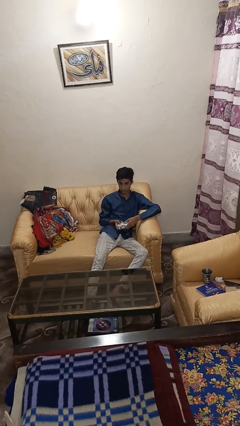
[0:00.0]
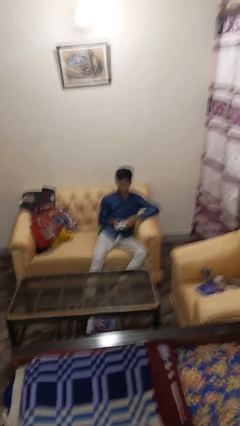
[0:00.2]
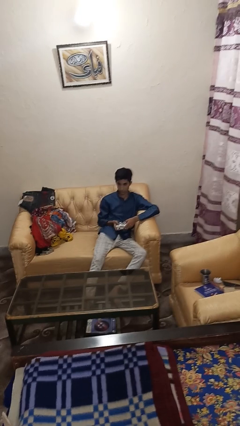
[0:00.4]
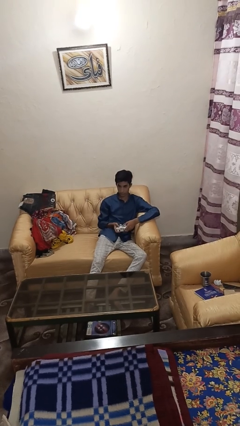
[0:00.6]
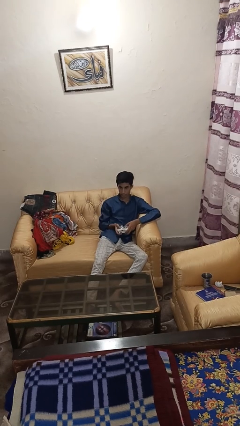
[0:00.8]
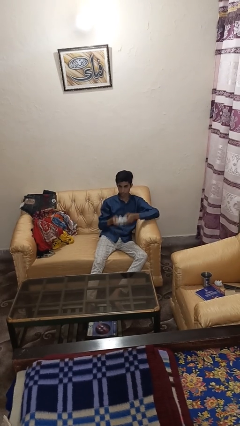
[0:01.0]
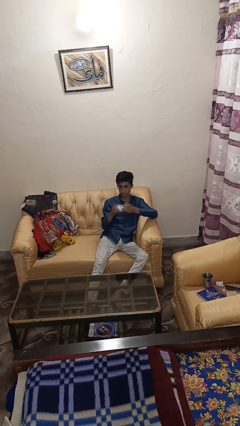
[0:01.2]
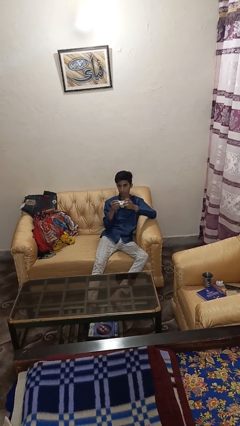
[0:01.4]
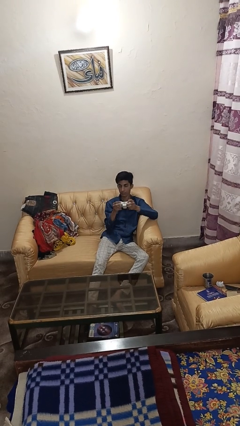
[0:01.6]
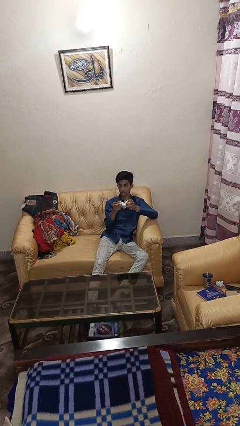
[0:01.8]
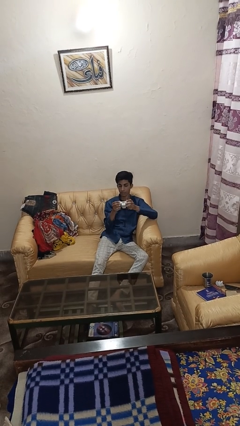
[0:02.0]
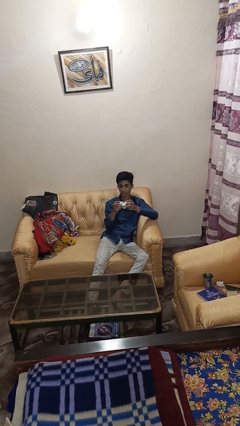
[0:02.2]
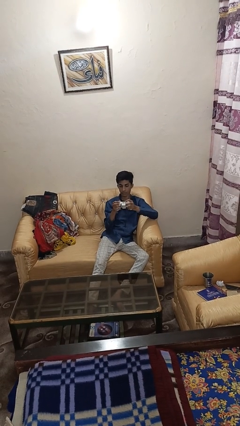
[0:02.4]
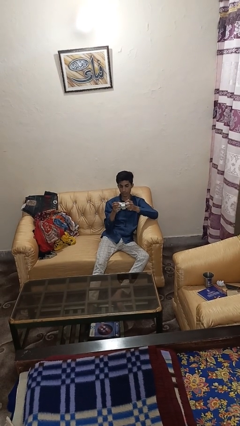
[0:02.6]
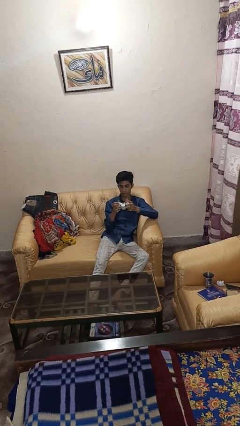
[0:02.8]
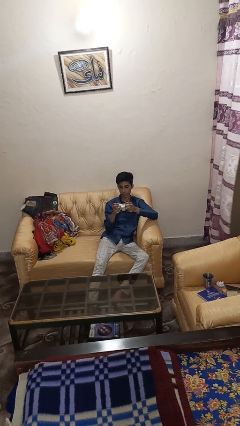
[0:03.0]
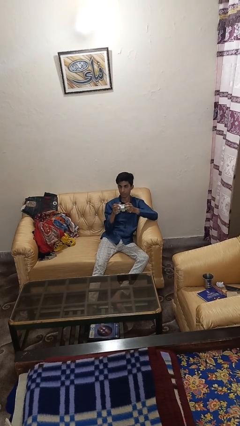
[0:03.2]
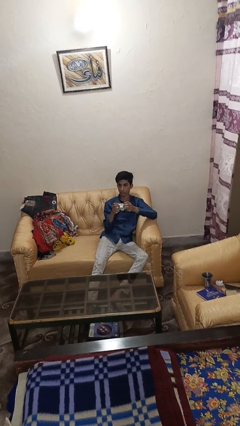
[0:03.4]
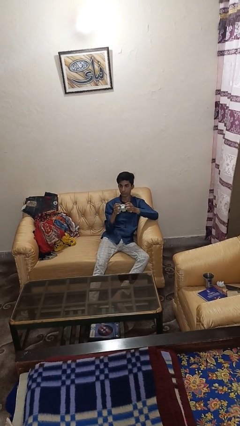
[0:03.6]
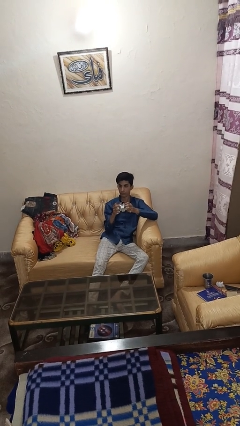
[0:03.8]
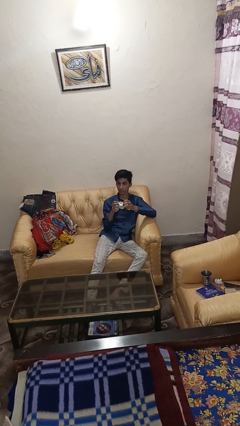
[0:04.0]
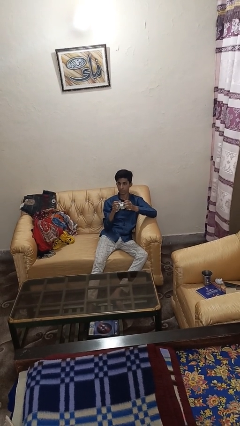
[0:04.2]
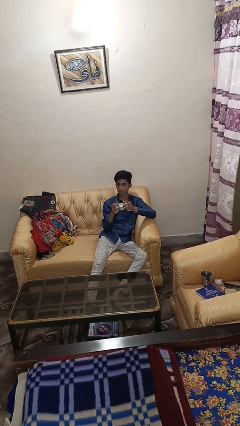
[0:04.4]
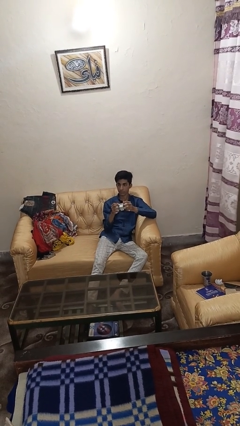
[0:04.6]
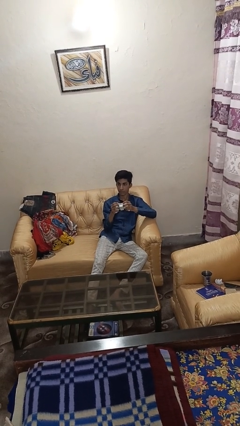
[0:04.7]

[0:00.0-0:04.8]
person interacts with handheld game

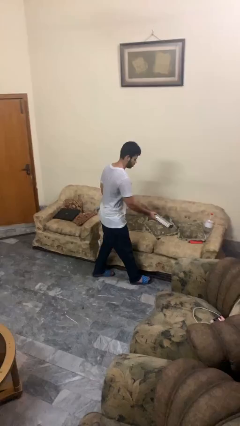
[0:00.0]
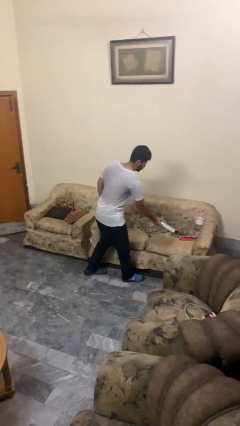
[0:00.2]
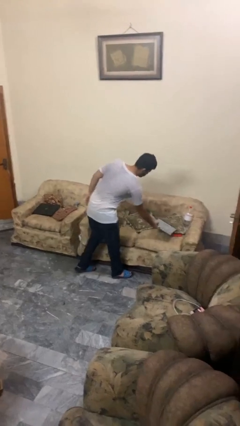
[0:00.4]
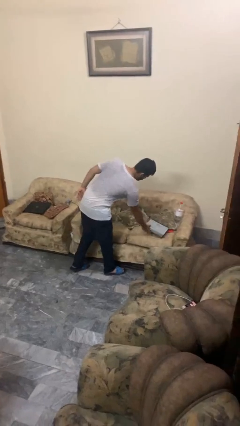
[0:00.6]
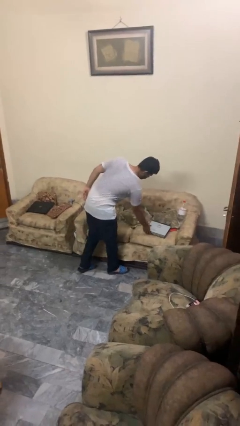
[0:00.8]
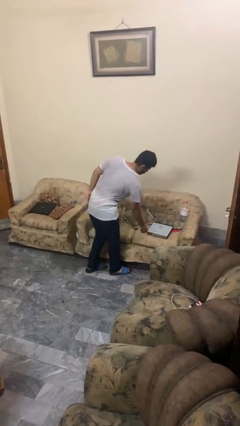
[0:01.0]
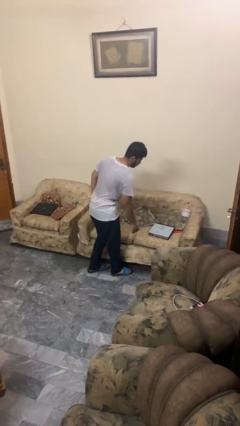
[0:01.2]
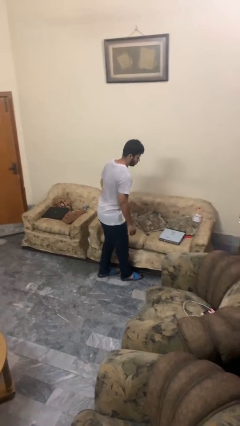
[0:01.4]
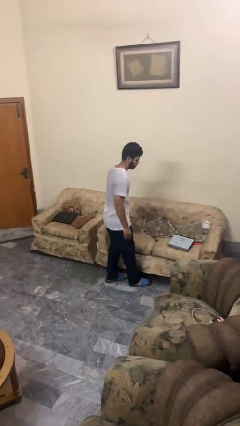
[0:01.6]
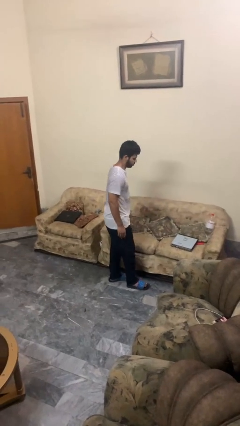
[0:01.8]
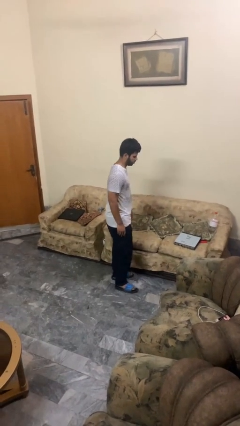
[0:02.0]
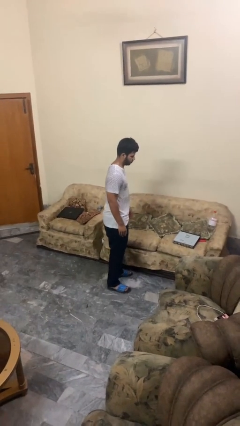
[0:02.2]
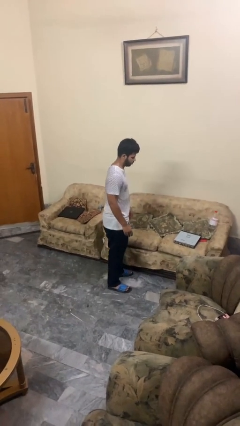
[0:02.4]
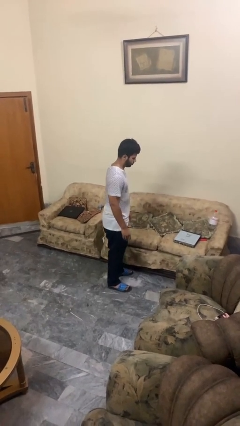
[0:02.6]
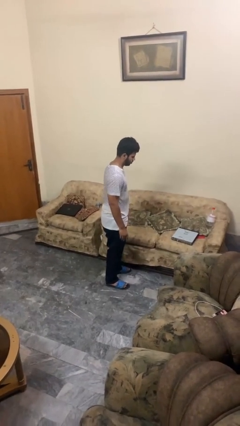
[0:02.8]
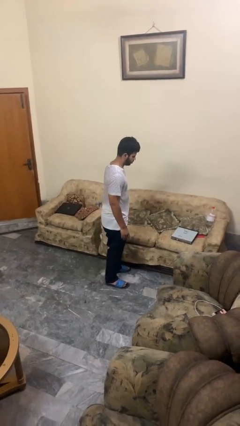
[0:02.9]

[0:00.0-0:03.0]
person puts down object on couch

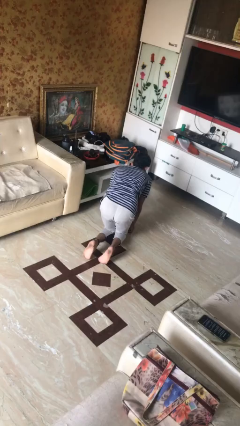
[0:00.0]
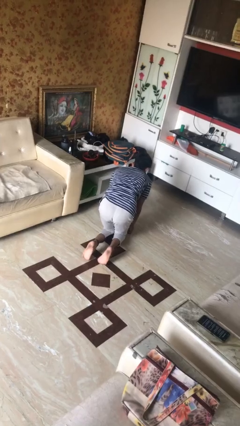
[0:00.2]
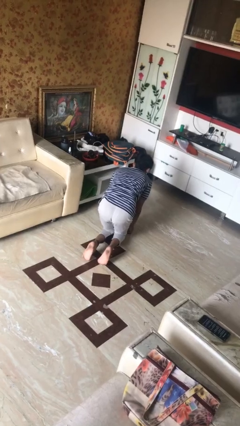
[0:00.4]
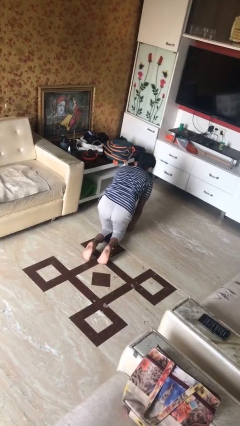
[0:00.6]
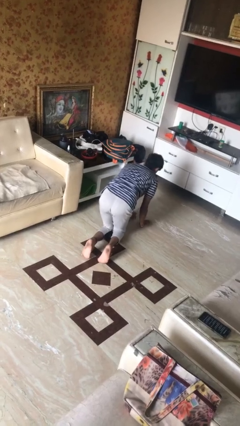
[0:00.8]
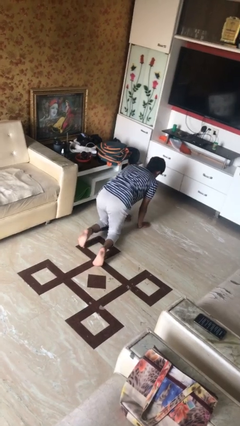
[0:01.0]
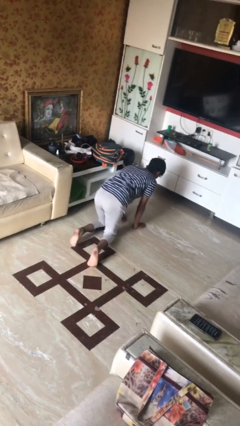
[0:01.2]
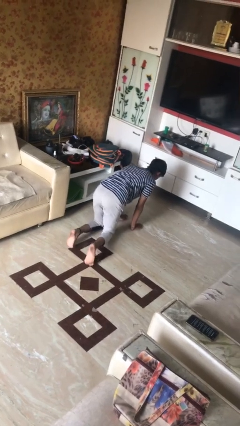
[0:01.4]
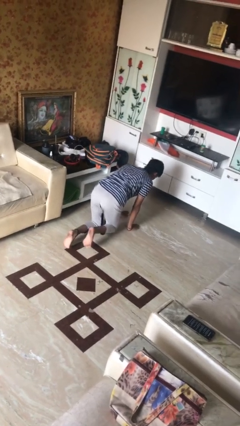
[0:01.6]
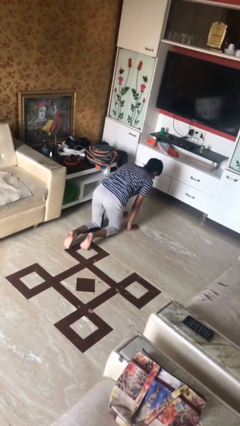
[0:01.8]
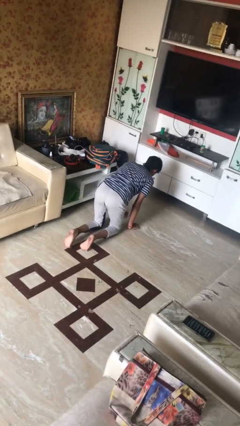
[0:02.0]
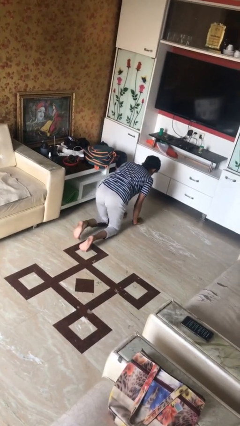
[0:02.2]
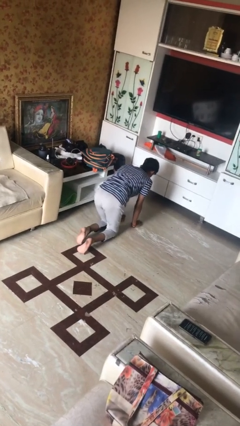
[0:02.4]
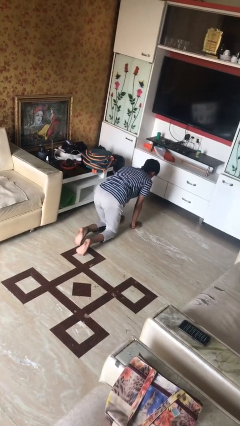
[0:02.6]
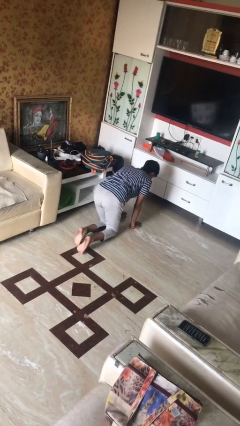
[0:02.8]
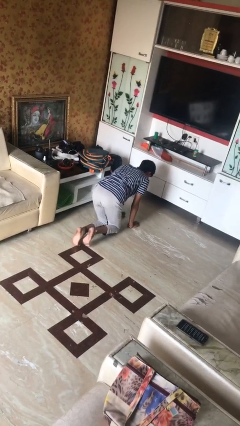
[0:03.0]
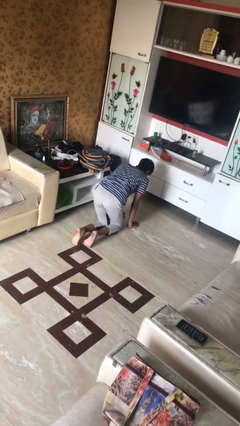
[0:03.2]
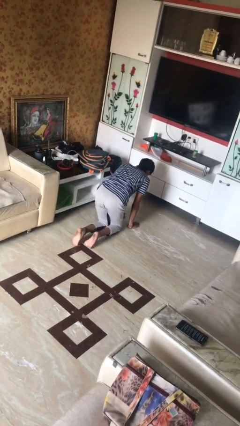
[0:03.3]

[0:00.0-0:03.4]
person crawls

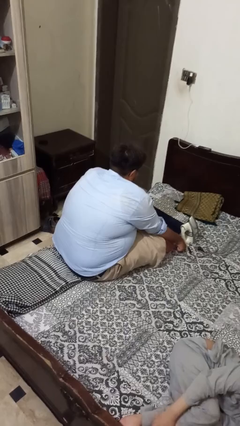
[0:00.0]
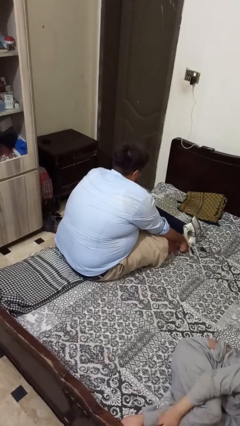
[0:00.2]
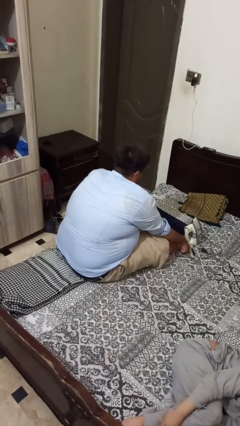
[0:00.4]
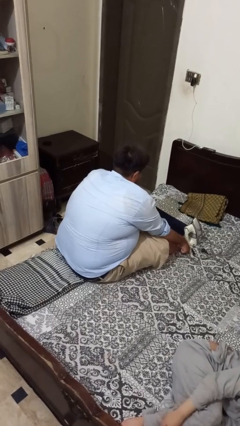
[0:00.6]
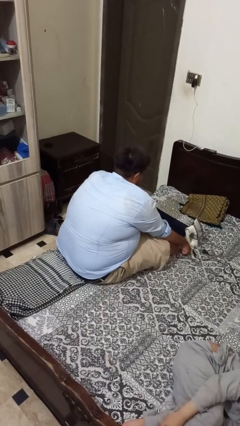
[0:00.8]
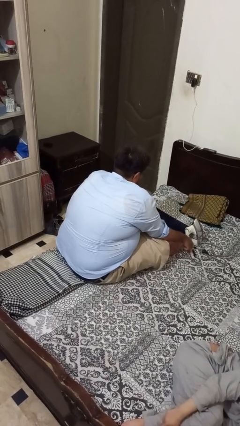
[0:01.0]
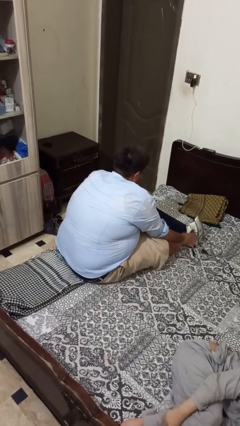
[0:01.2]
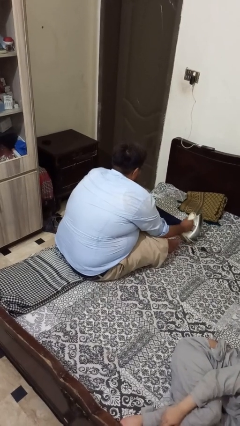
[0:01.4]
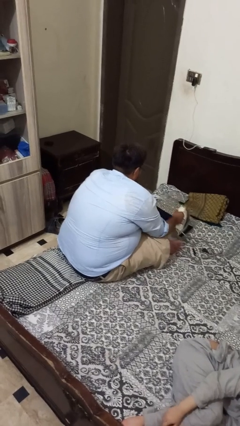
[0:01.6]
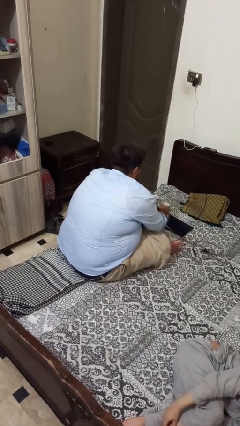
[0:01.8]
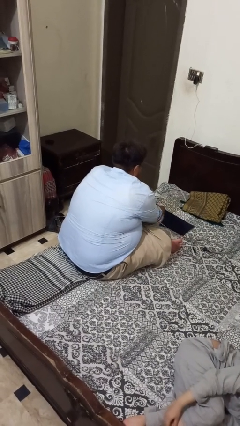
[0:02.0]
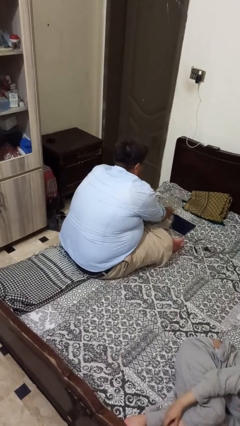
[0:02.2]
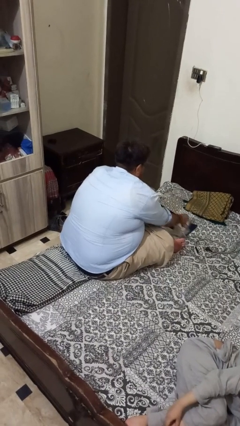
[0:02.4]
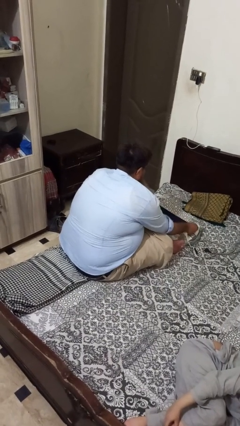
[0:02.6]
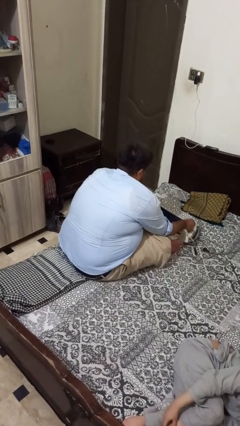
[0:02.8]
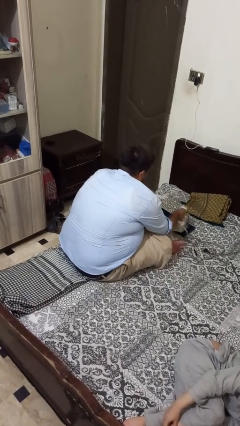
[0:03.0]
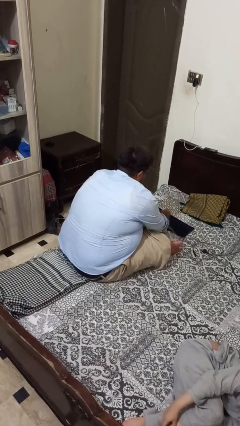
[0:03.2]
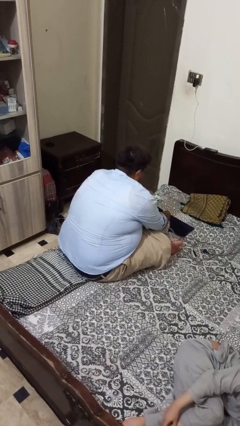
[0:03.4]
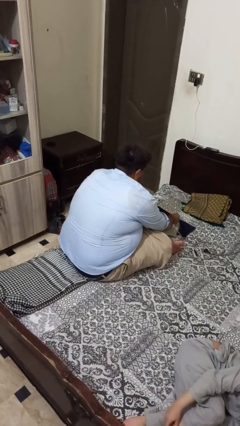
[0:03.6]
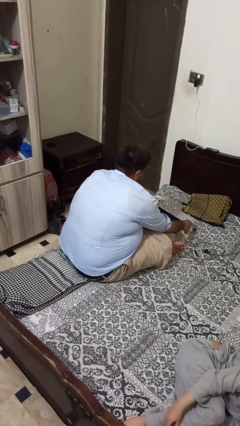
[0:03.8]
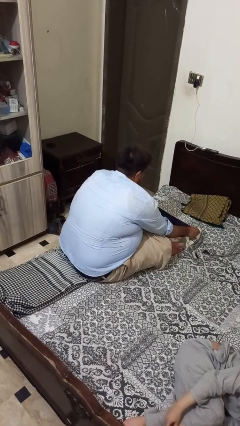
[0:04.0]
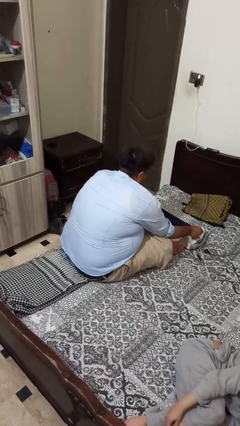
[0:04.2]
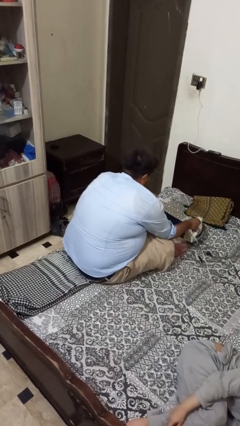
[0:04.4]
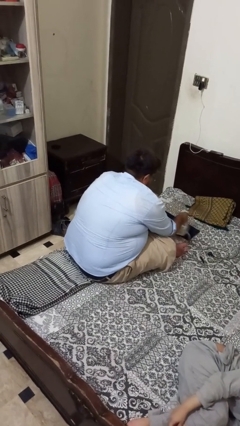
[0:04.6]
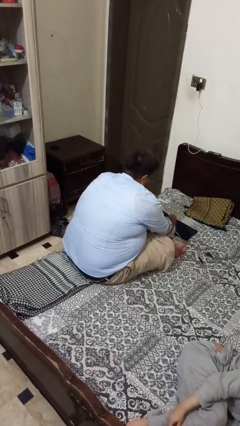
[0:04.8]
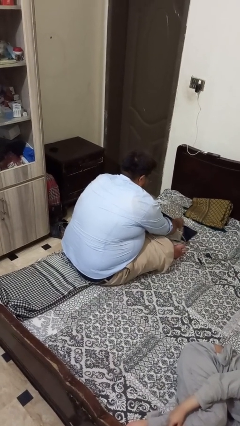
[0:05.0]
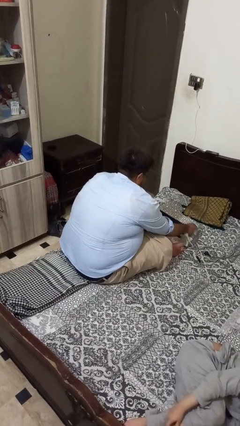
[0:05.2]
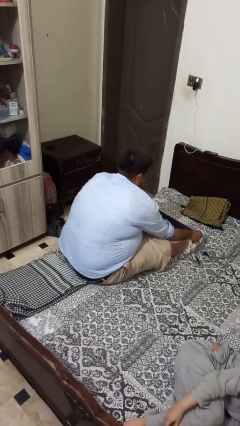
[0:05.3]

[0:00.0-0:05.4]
person irons clothes

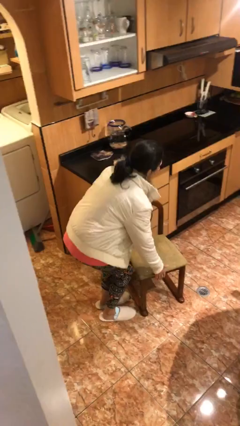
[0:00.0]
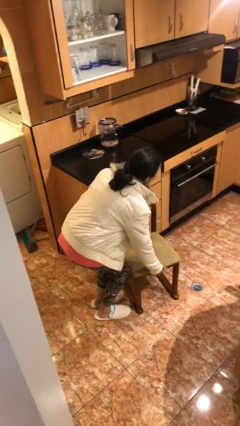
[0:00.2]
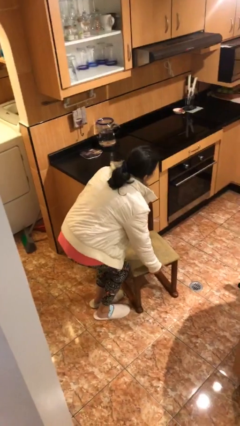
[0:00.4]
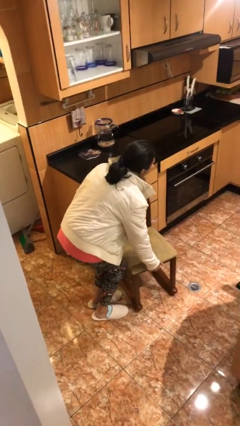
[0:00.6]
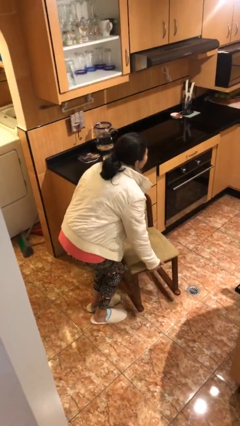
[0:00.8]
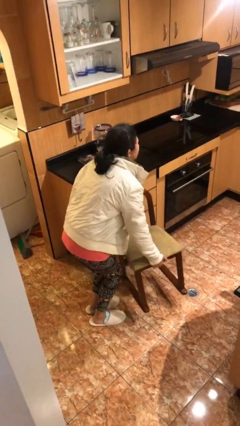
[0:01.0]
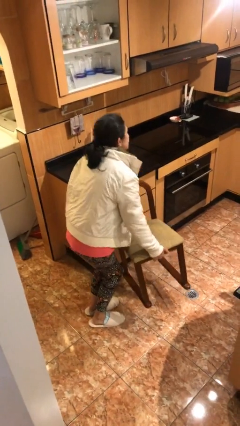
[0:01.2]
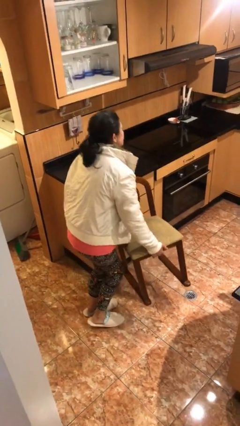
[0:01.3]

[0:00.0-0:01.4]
person picks up object from floor
